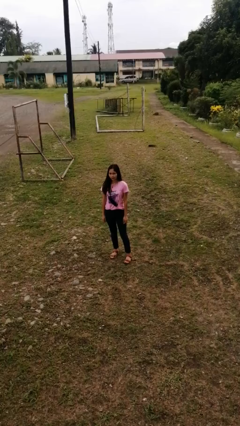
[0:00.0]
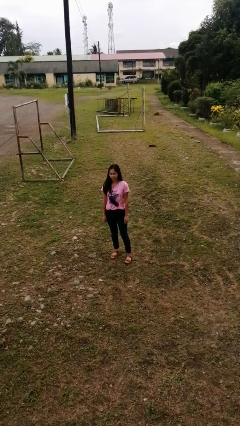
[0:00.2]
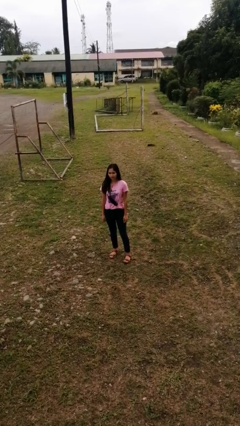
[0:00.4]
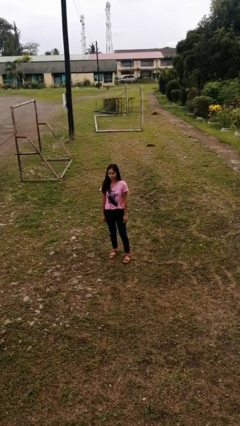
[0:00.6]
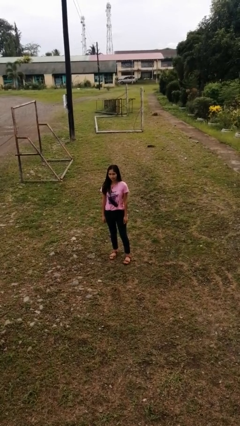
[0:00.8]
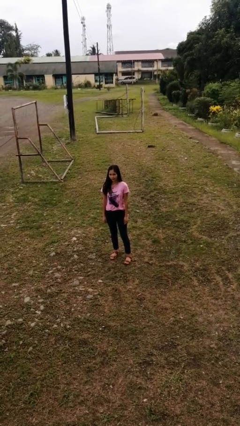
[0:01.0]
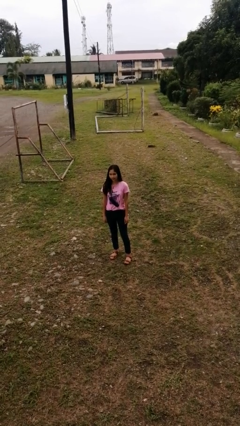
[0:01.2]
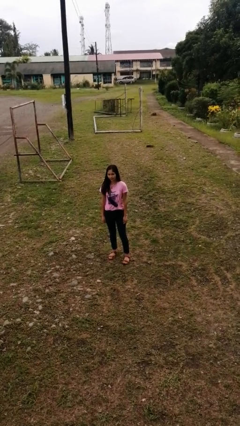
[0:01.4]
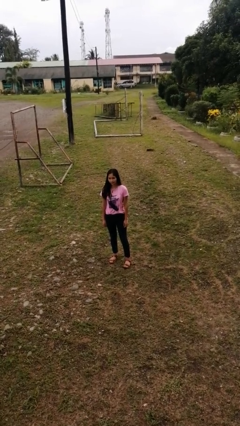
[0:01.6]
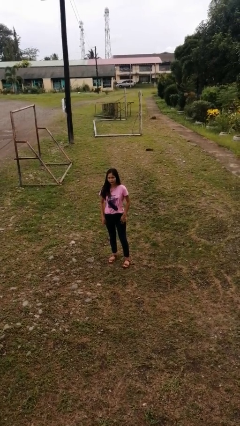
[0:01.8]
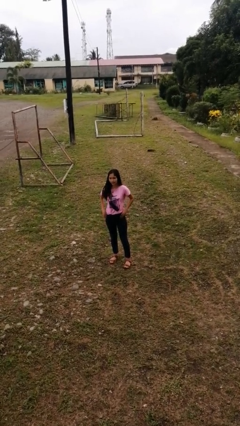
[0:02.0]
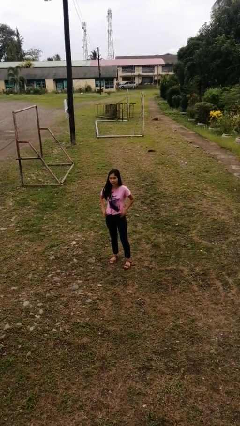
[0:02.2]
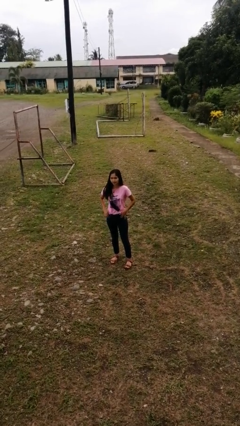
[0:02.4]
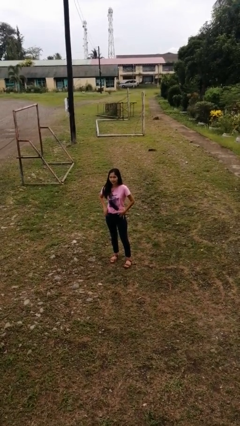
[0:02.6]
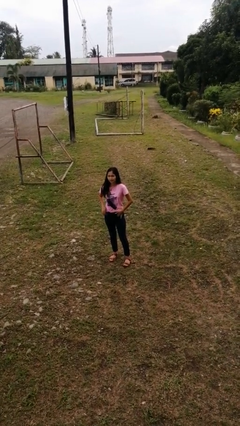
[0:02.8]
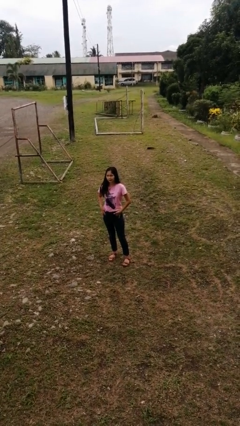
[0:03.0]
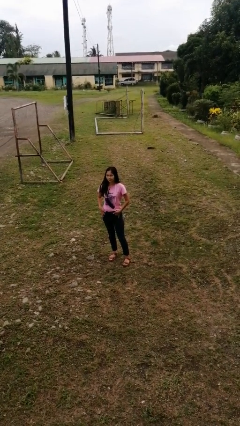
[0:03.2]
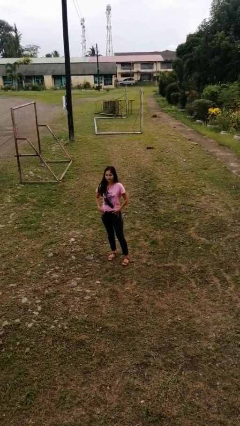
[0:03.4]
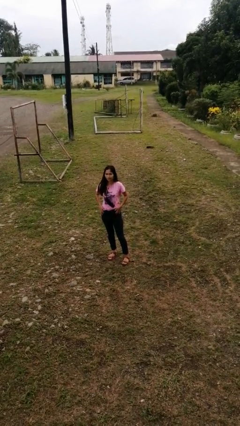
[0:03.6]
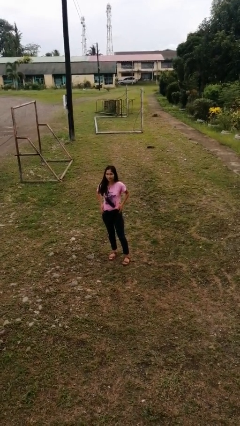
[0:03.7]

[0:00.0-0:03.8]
person puts hands in back pockets

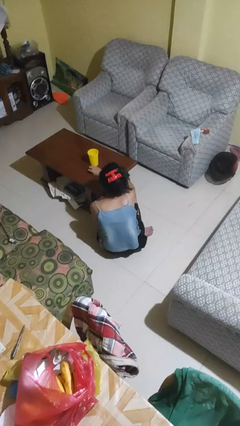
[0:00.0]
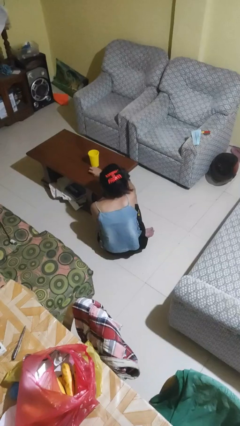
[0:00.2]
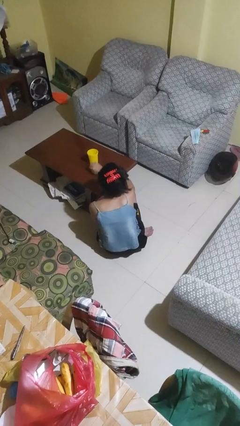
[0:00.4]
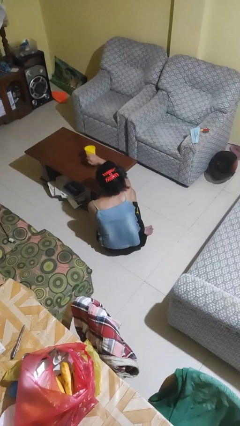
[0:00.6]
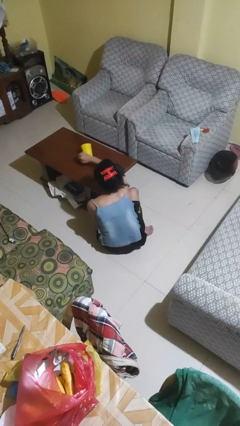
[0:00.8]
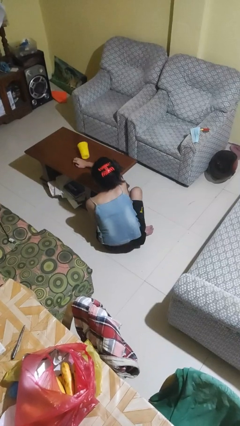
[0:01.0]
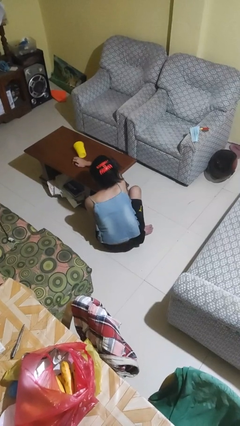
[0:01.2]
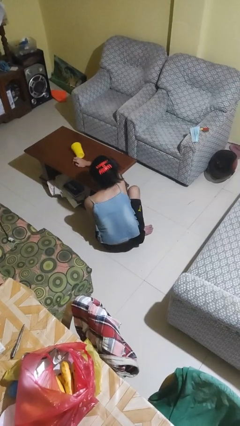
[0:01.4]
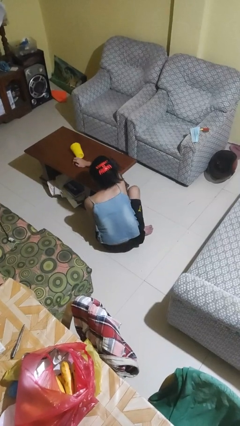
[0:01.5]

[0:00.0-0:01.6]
person knocks over glass

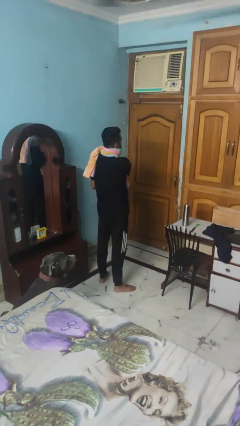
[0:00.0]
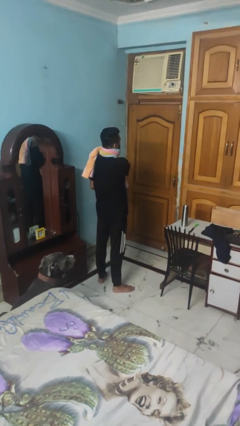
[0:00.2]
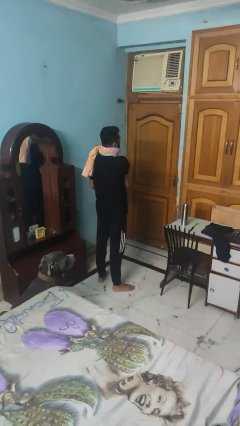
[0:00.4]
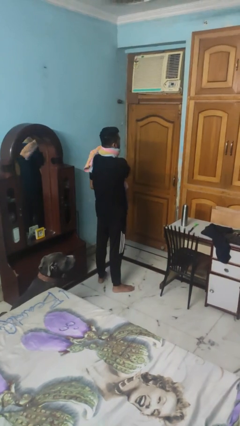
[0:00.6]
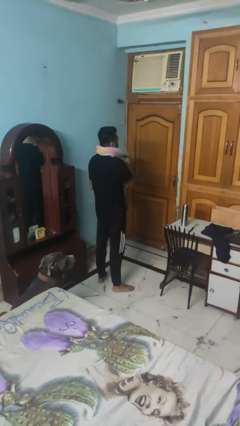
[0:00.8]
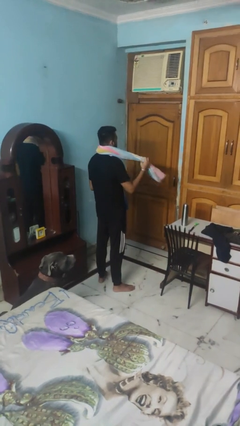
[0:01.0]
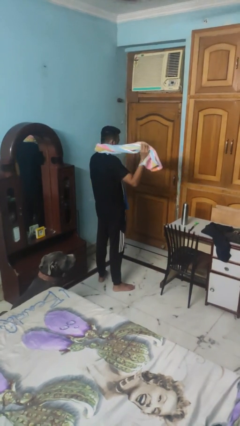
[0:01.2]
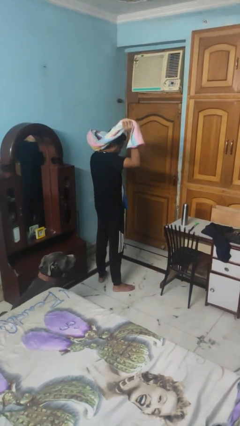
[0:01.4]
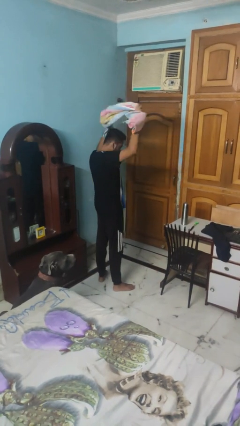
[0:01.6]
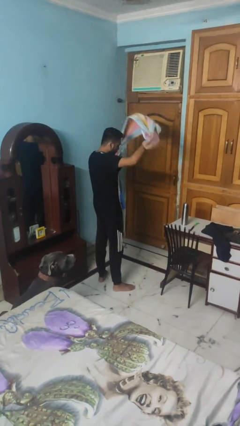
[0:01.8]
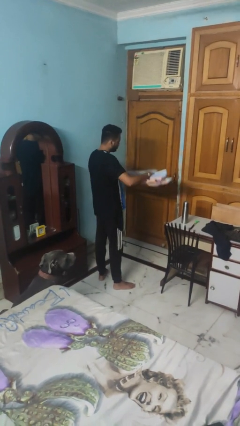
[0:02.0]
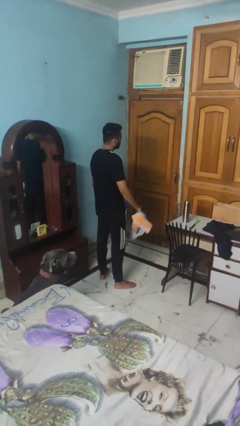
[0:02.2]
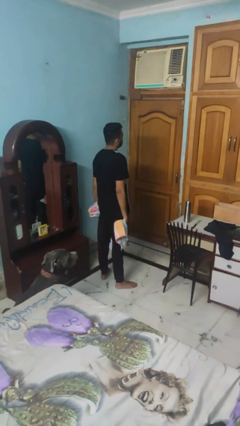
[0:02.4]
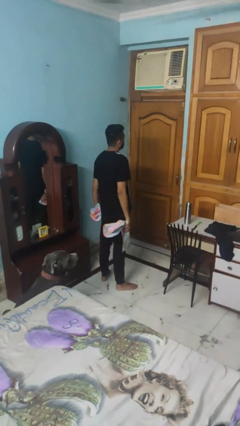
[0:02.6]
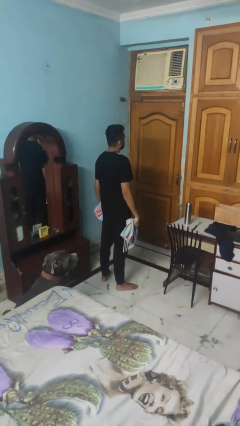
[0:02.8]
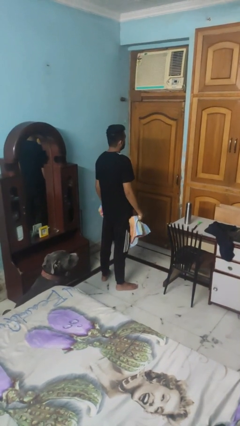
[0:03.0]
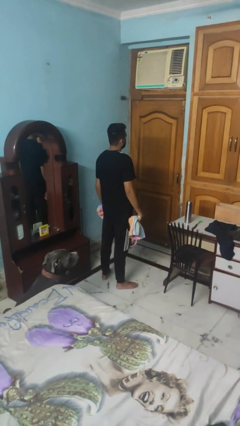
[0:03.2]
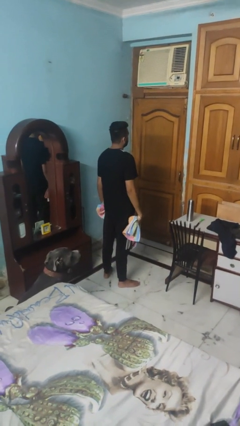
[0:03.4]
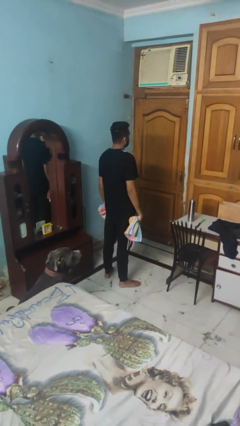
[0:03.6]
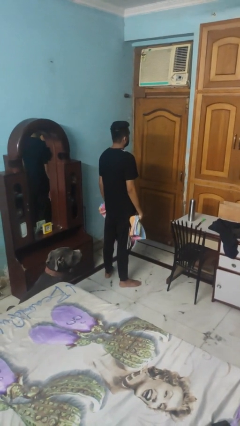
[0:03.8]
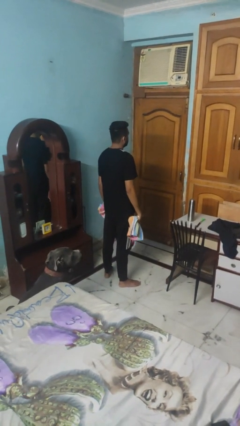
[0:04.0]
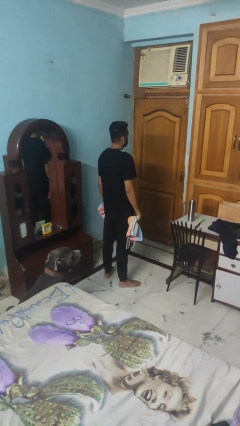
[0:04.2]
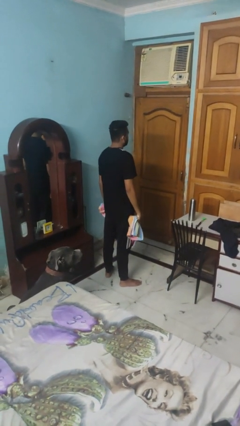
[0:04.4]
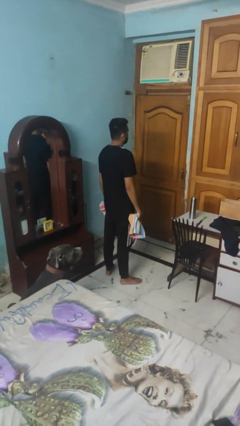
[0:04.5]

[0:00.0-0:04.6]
person takes off scarf

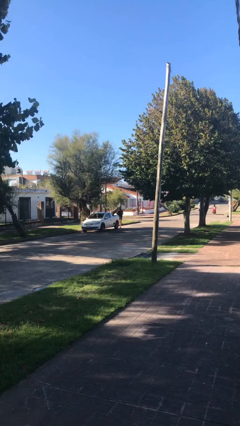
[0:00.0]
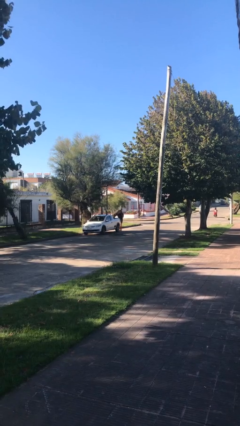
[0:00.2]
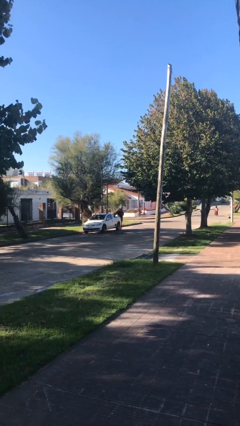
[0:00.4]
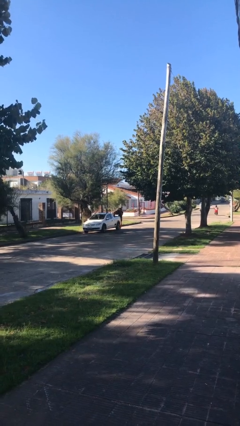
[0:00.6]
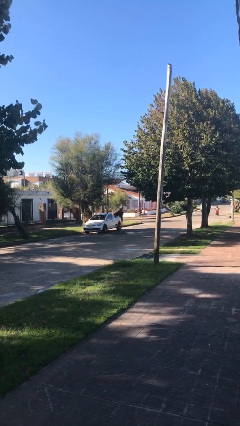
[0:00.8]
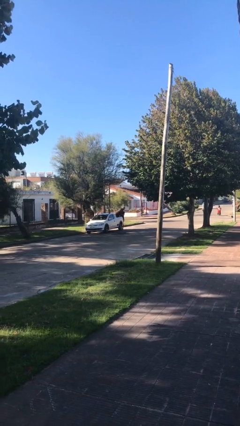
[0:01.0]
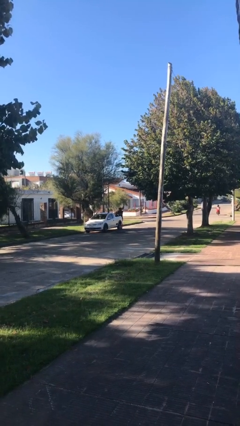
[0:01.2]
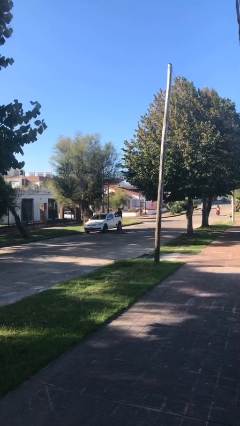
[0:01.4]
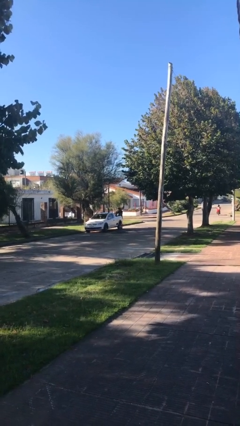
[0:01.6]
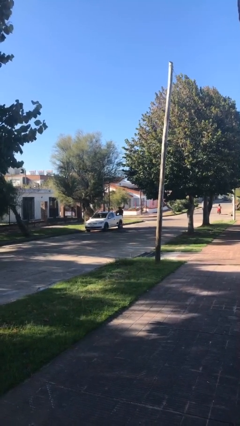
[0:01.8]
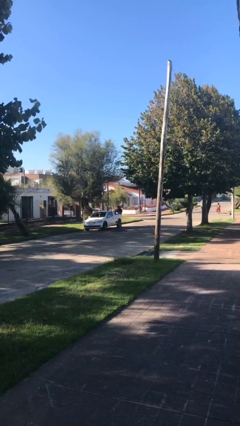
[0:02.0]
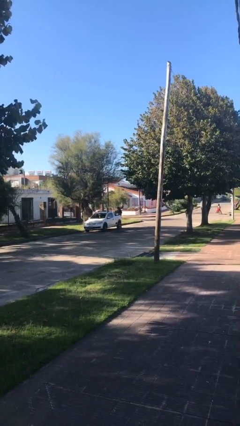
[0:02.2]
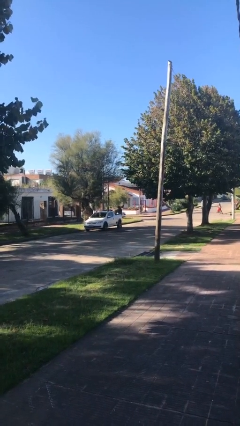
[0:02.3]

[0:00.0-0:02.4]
person loads car

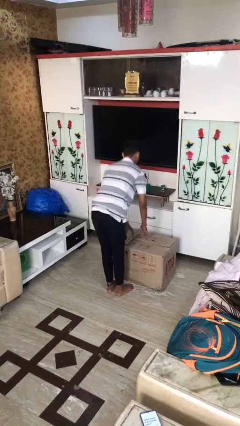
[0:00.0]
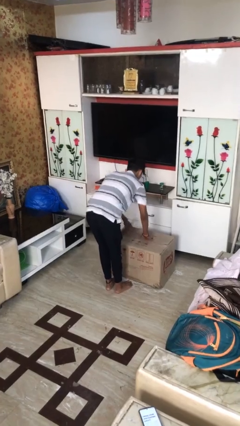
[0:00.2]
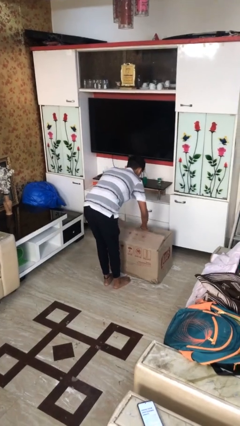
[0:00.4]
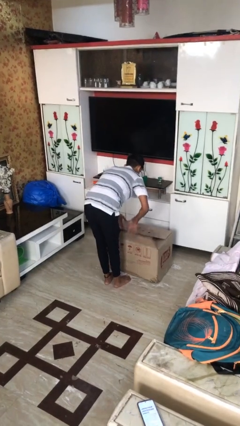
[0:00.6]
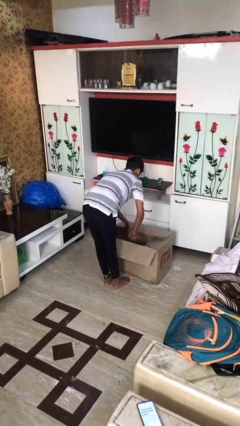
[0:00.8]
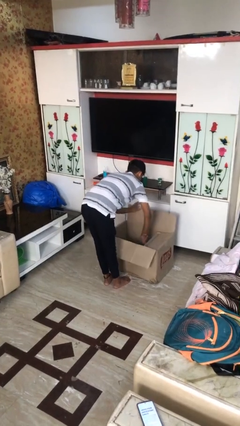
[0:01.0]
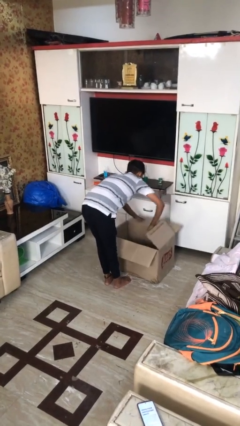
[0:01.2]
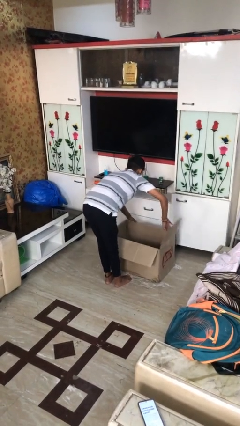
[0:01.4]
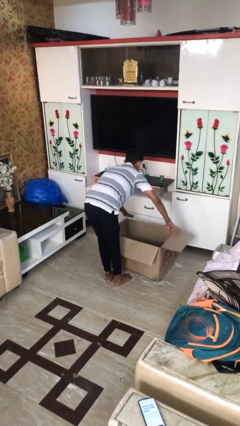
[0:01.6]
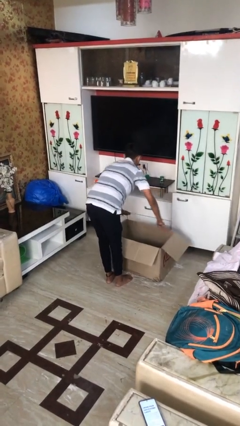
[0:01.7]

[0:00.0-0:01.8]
person opens box

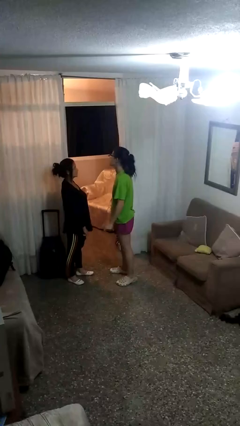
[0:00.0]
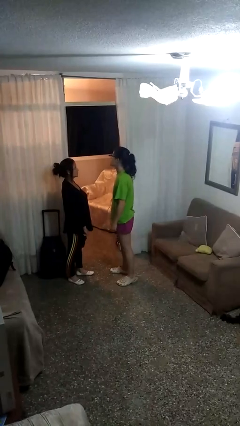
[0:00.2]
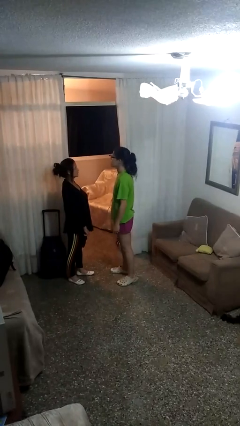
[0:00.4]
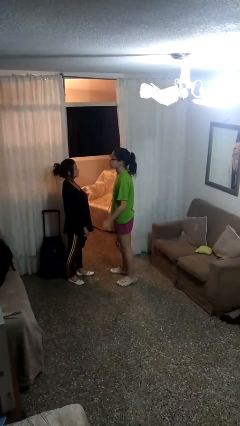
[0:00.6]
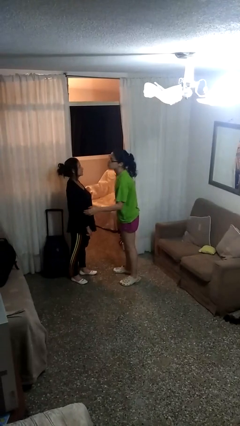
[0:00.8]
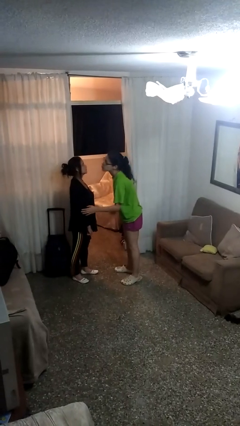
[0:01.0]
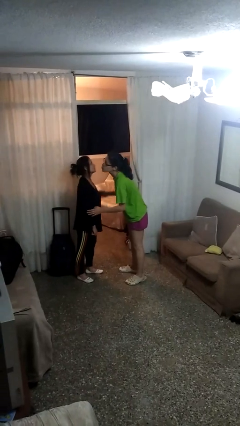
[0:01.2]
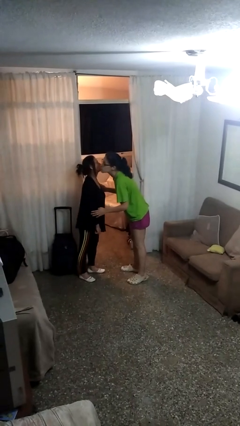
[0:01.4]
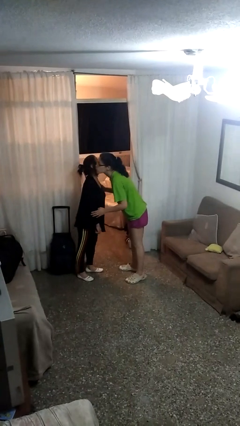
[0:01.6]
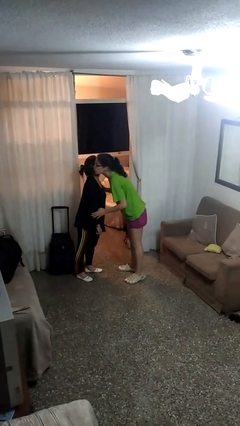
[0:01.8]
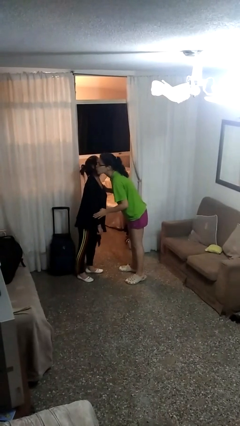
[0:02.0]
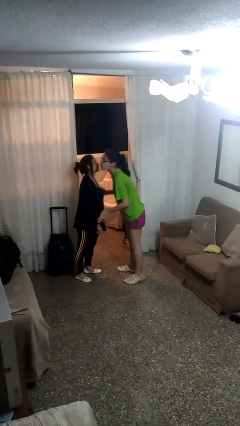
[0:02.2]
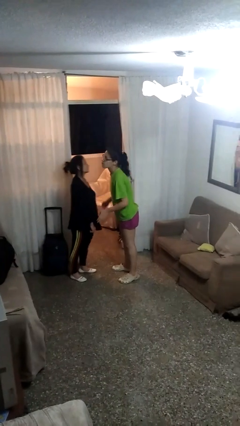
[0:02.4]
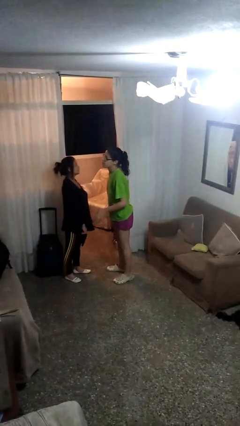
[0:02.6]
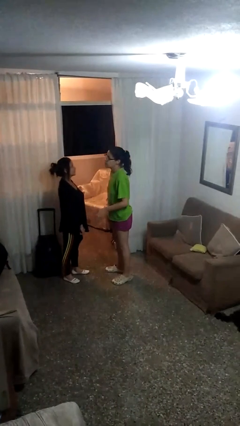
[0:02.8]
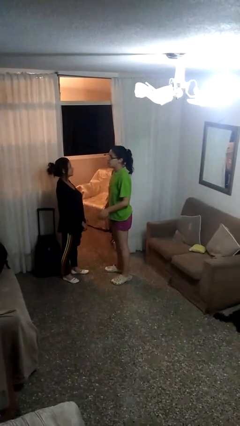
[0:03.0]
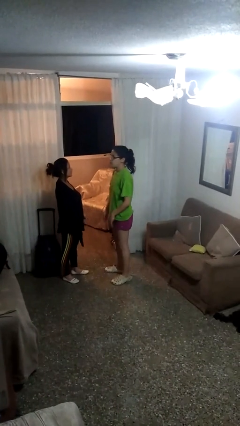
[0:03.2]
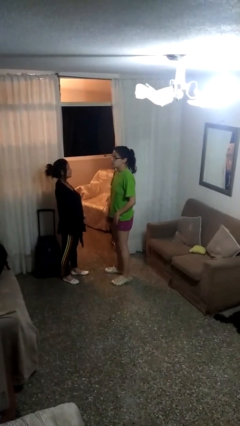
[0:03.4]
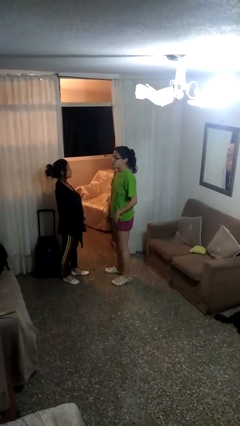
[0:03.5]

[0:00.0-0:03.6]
person kisses cheek of person
